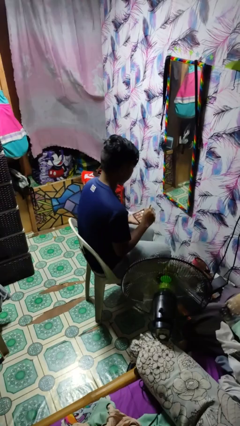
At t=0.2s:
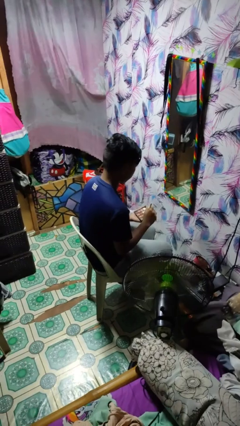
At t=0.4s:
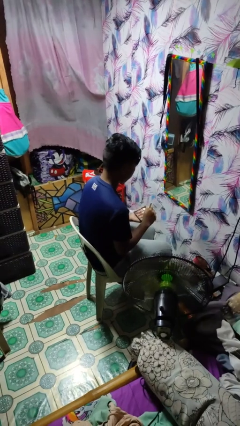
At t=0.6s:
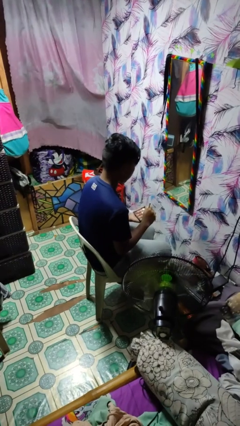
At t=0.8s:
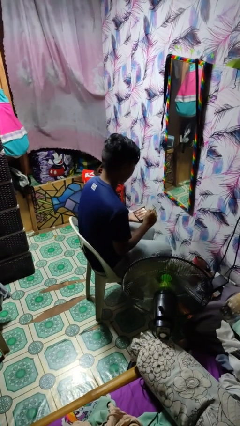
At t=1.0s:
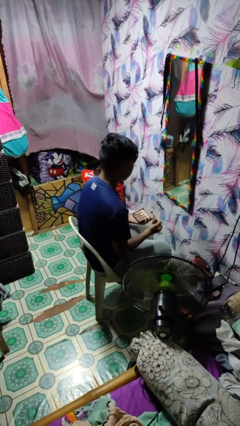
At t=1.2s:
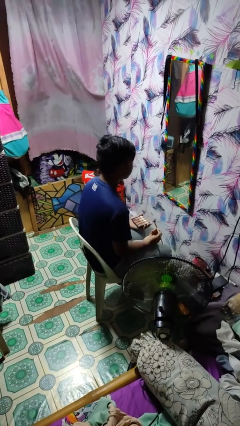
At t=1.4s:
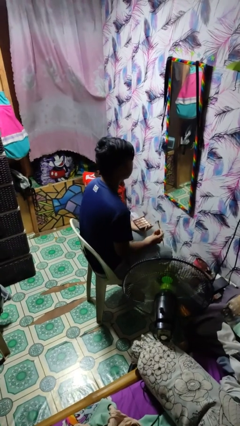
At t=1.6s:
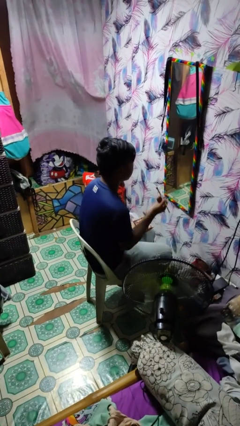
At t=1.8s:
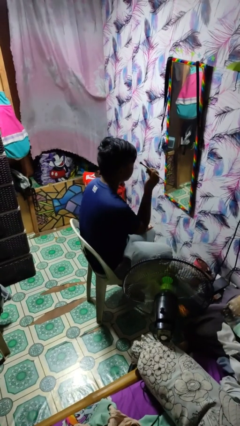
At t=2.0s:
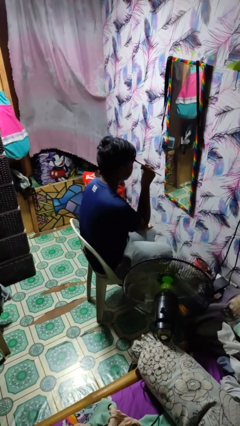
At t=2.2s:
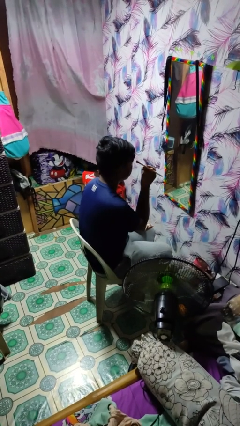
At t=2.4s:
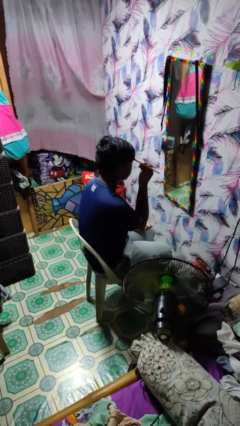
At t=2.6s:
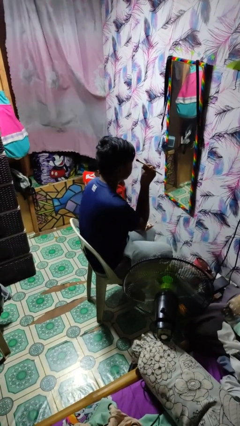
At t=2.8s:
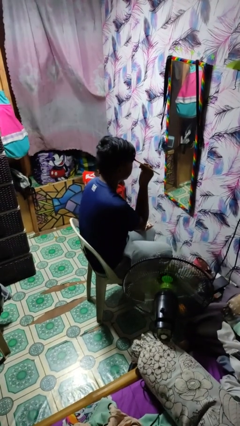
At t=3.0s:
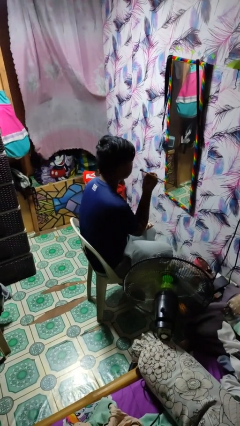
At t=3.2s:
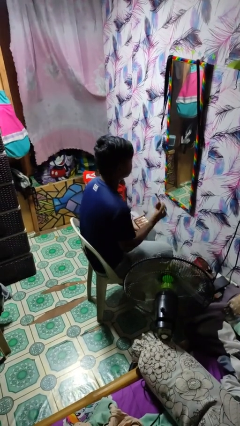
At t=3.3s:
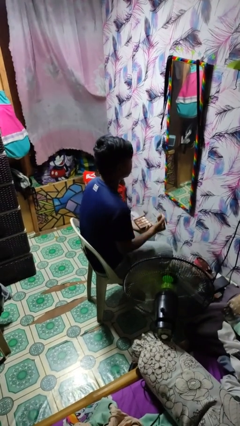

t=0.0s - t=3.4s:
person applies eye makeup

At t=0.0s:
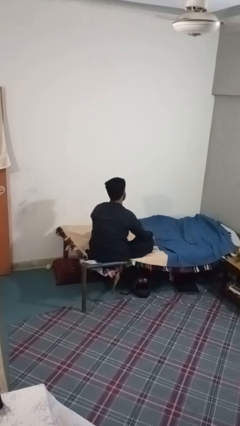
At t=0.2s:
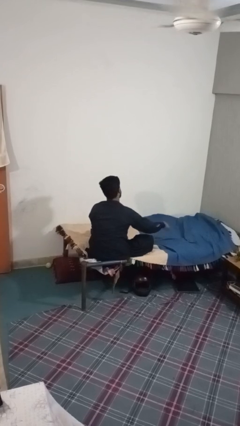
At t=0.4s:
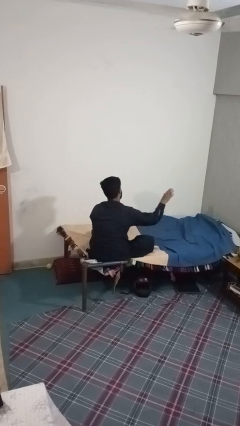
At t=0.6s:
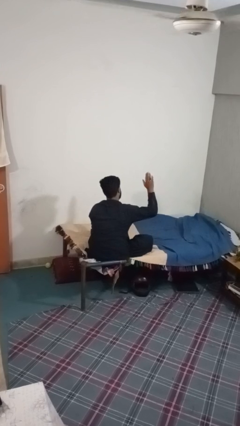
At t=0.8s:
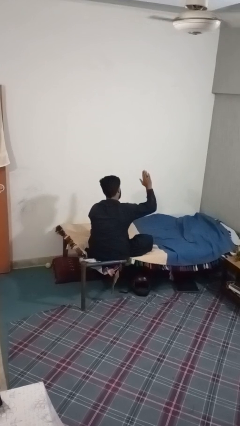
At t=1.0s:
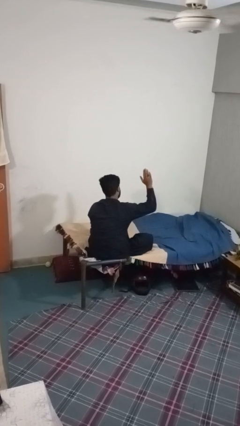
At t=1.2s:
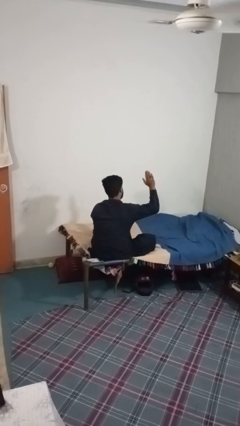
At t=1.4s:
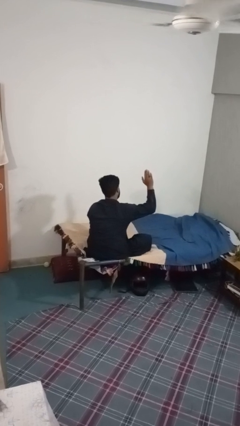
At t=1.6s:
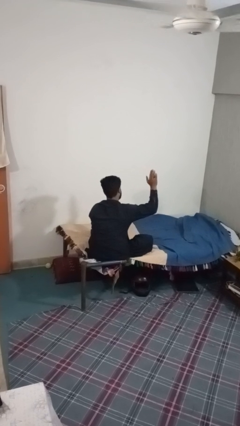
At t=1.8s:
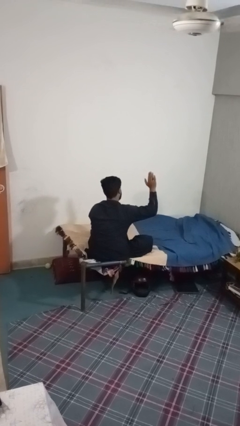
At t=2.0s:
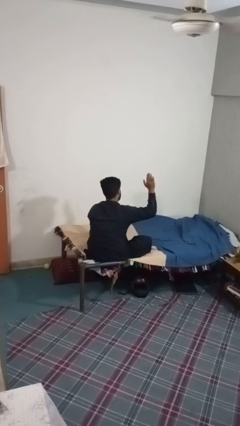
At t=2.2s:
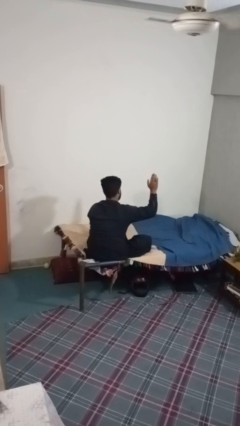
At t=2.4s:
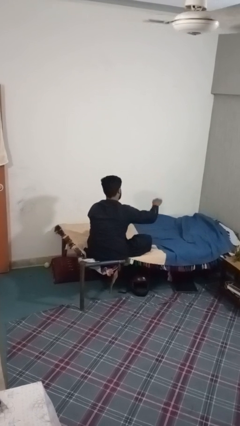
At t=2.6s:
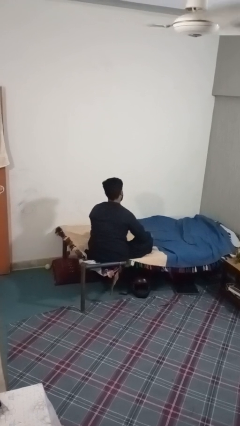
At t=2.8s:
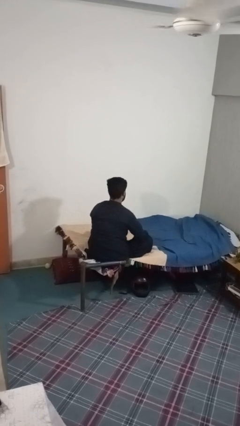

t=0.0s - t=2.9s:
person gestures stop

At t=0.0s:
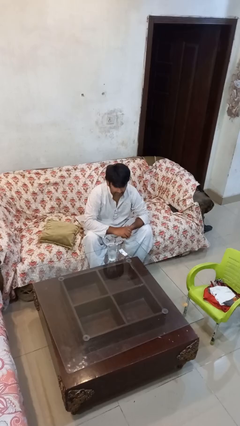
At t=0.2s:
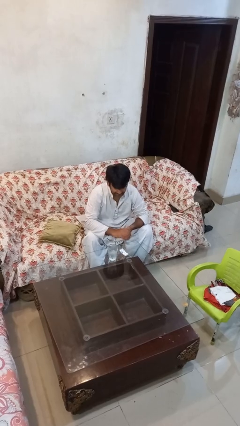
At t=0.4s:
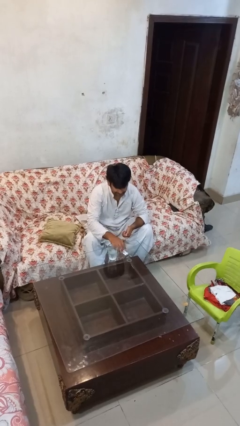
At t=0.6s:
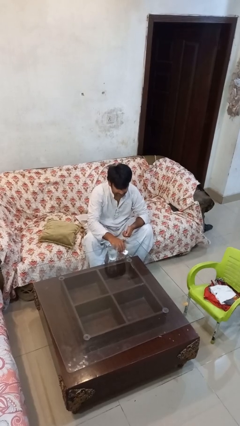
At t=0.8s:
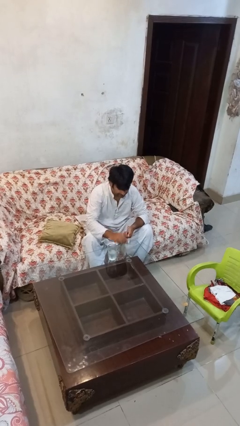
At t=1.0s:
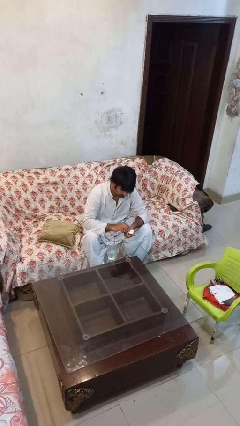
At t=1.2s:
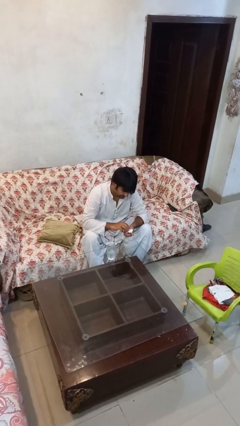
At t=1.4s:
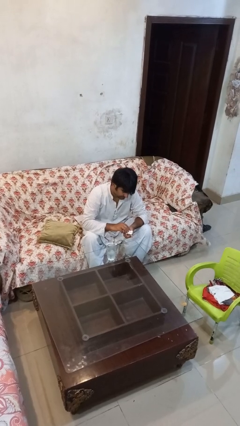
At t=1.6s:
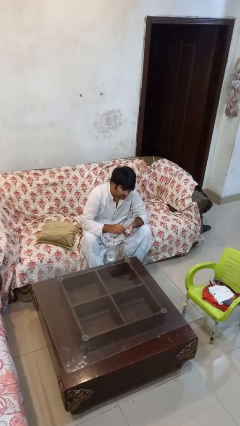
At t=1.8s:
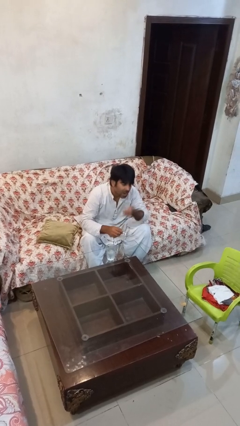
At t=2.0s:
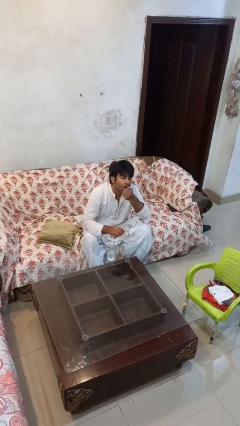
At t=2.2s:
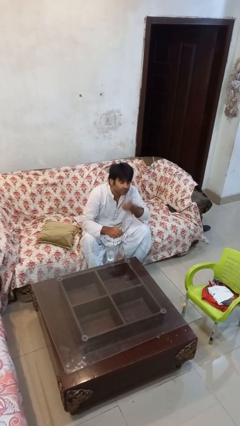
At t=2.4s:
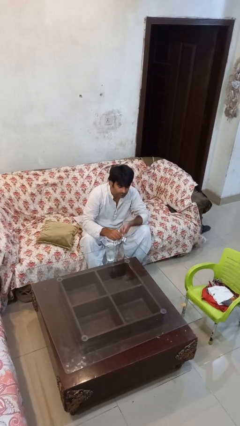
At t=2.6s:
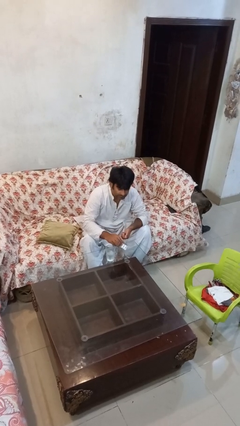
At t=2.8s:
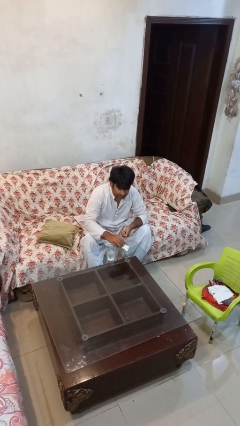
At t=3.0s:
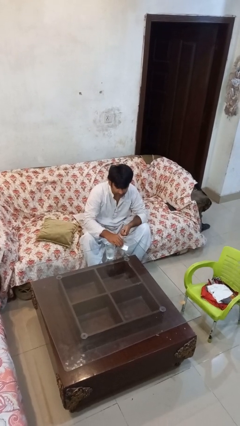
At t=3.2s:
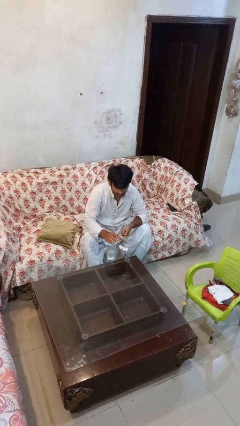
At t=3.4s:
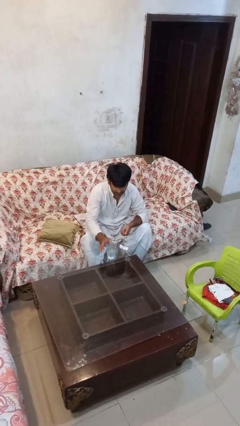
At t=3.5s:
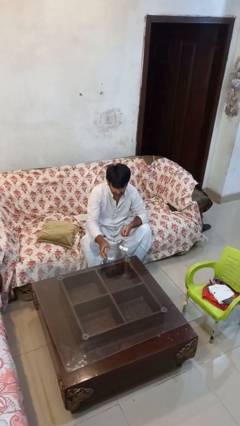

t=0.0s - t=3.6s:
person takes medicine pills

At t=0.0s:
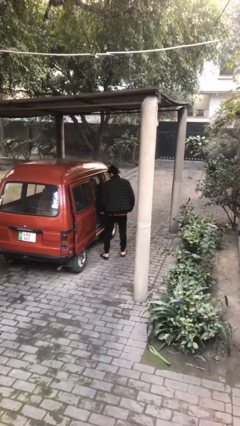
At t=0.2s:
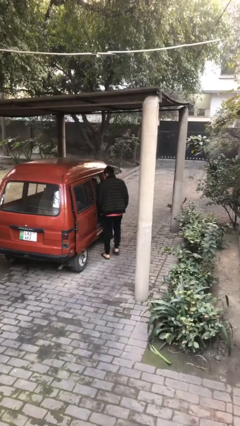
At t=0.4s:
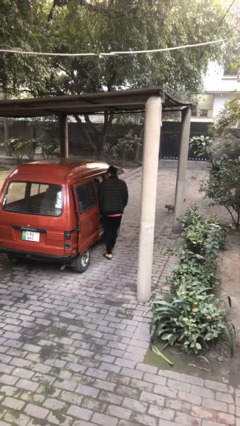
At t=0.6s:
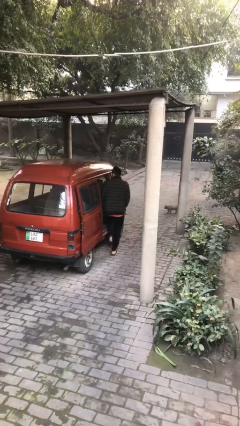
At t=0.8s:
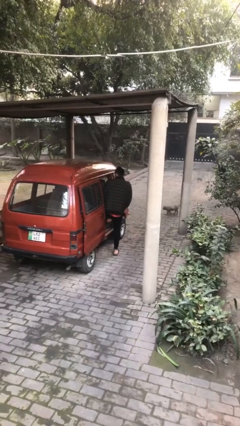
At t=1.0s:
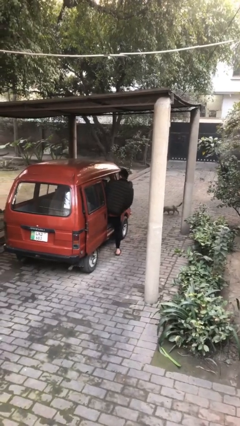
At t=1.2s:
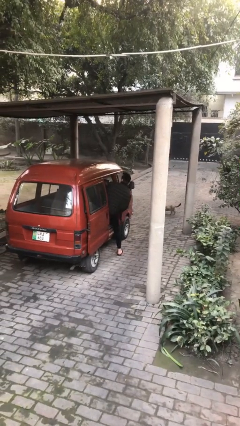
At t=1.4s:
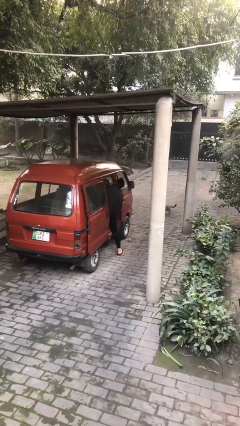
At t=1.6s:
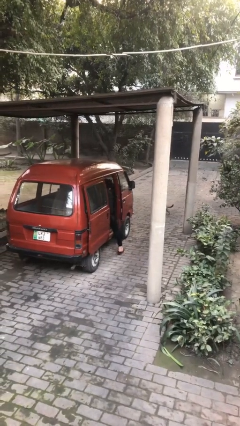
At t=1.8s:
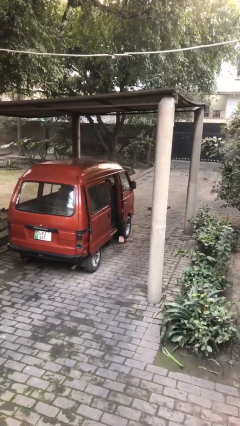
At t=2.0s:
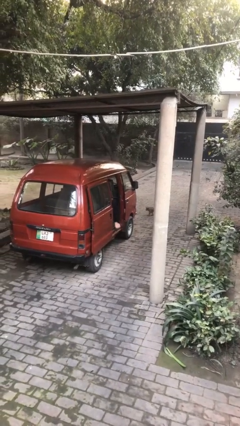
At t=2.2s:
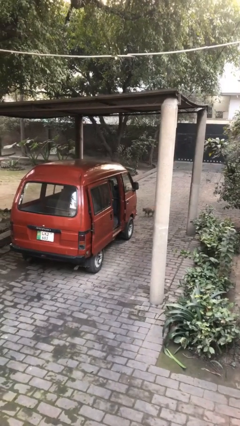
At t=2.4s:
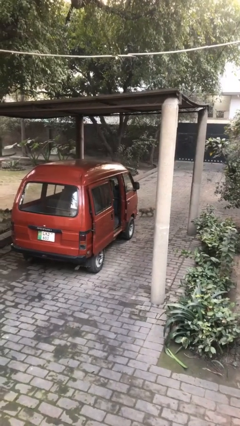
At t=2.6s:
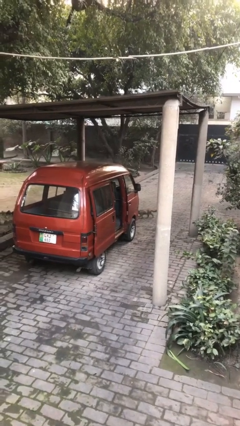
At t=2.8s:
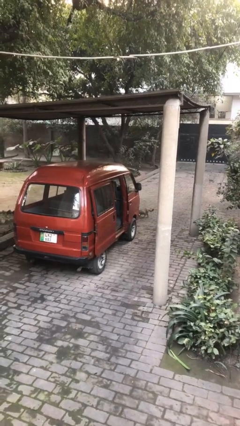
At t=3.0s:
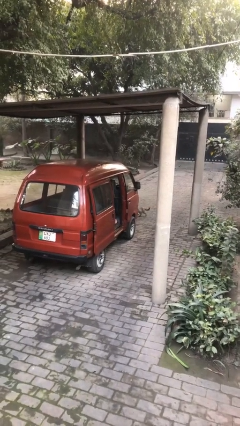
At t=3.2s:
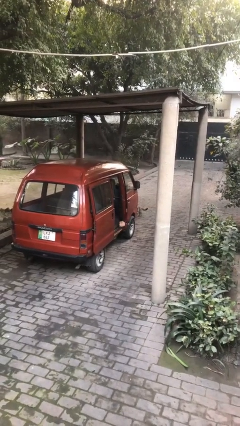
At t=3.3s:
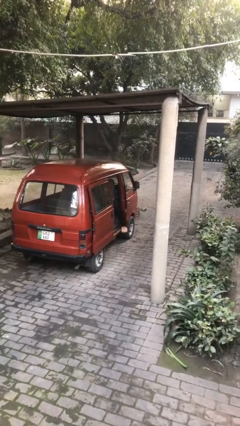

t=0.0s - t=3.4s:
person enters car

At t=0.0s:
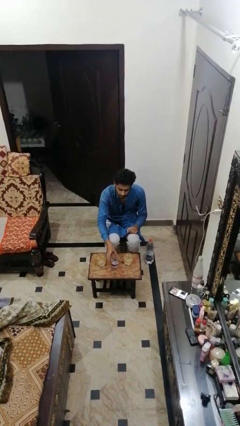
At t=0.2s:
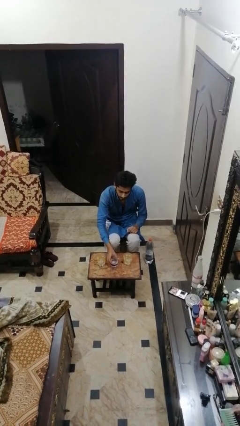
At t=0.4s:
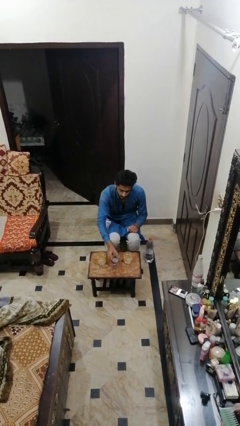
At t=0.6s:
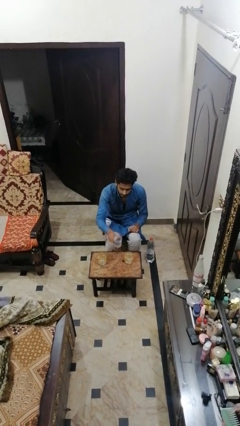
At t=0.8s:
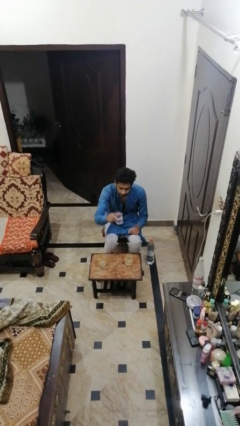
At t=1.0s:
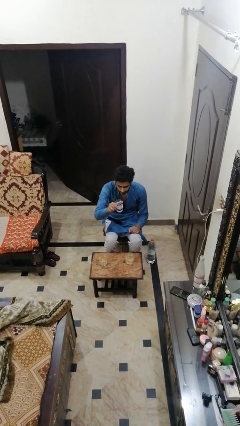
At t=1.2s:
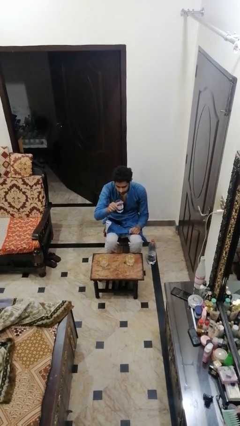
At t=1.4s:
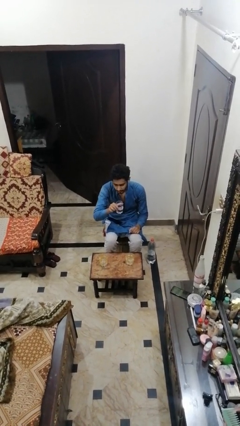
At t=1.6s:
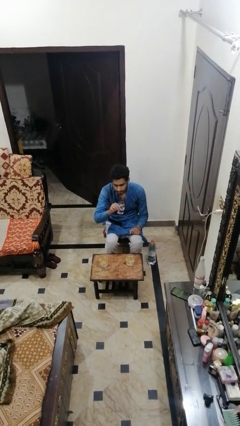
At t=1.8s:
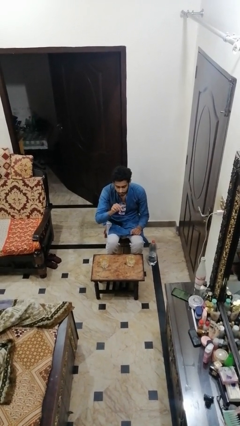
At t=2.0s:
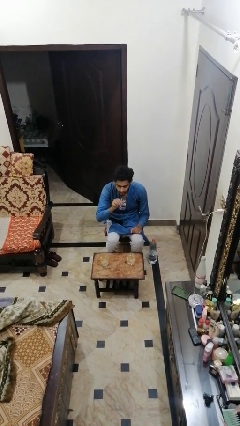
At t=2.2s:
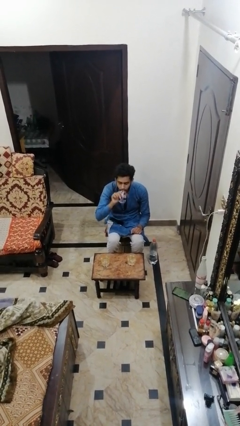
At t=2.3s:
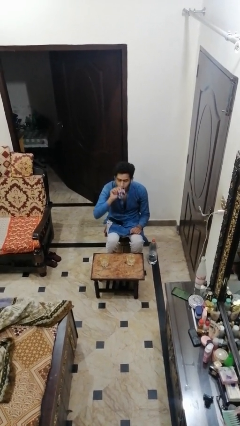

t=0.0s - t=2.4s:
person picks up object from table

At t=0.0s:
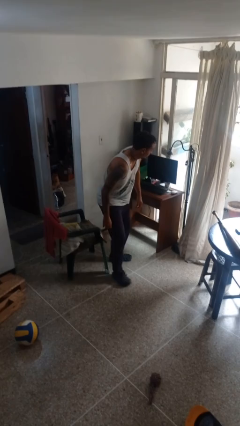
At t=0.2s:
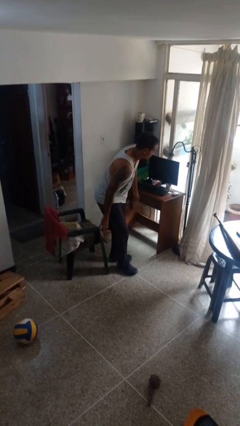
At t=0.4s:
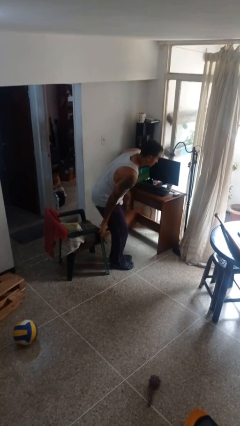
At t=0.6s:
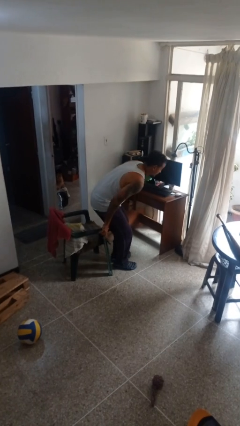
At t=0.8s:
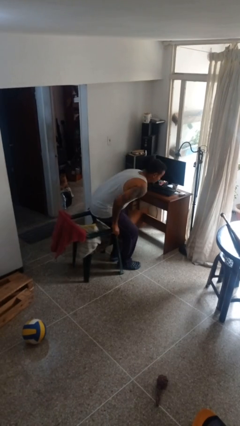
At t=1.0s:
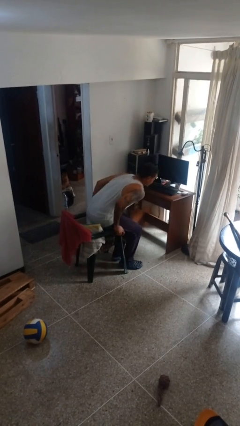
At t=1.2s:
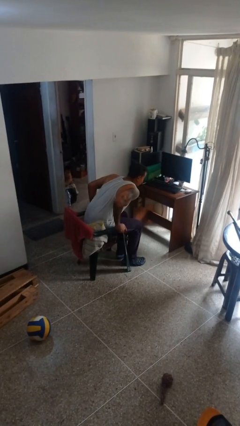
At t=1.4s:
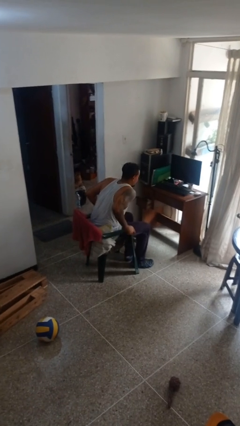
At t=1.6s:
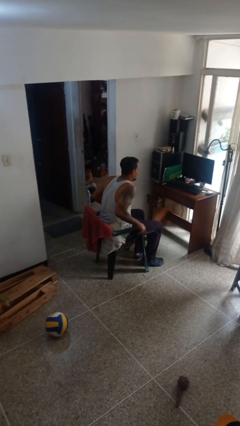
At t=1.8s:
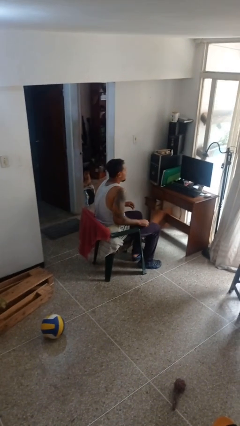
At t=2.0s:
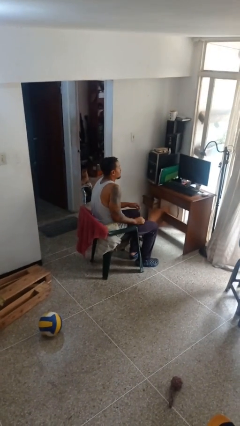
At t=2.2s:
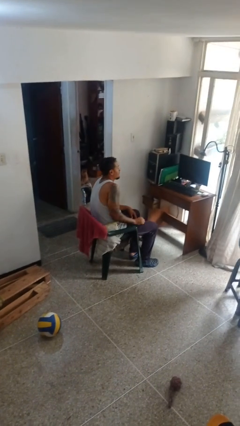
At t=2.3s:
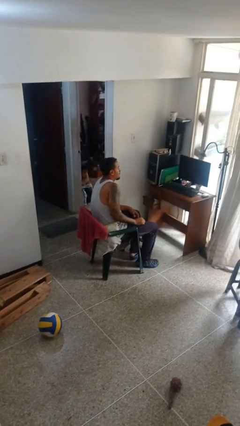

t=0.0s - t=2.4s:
person sits down
